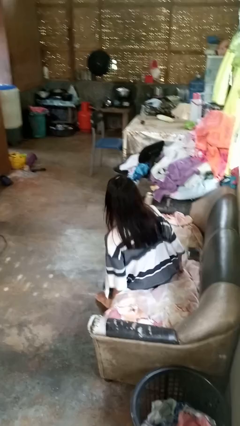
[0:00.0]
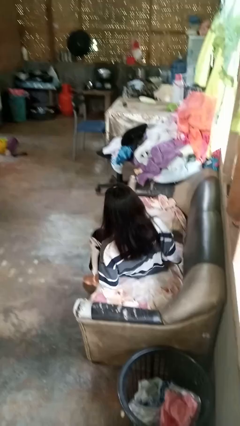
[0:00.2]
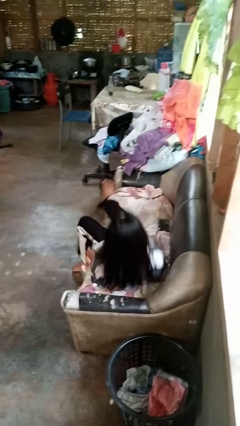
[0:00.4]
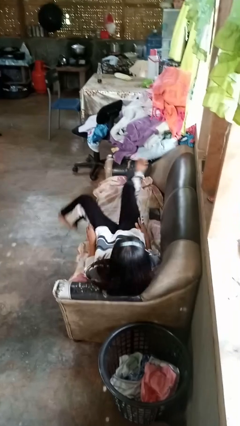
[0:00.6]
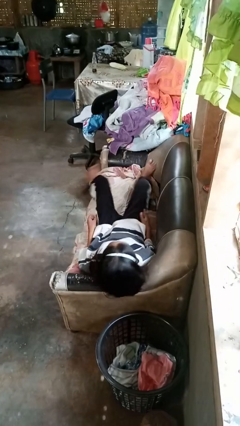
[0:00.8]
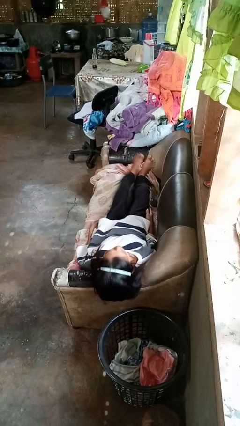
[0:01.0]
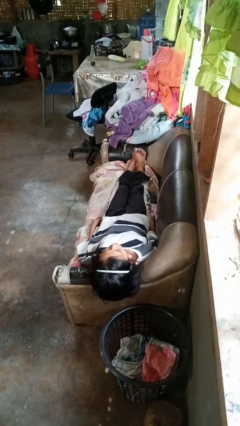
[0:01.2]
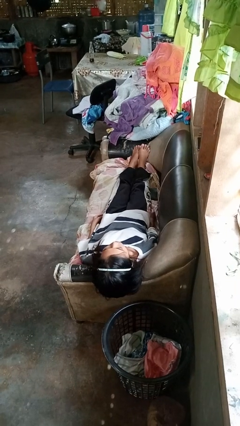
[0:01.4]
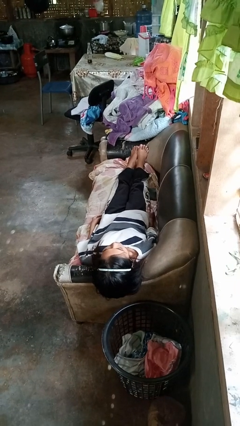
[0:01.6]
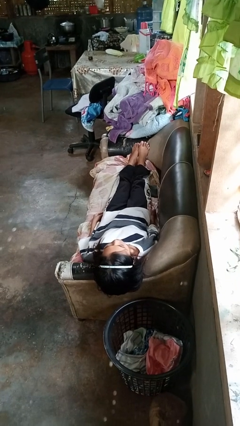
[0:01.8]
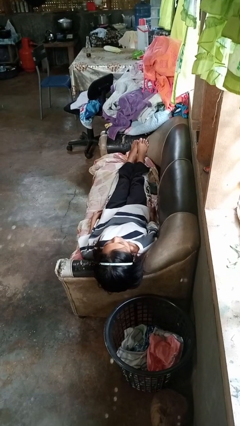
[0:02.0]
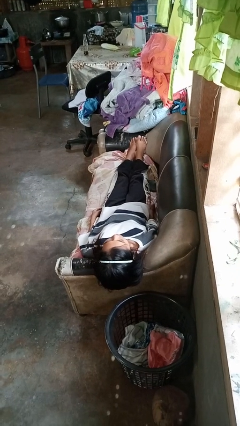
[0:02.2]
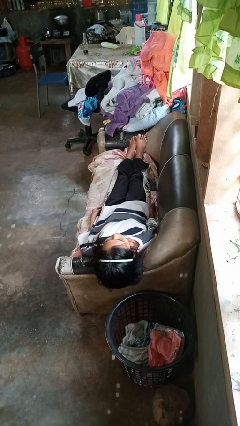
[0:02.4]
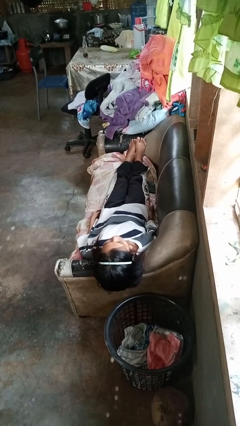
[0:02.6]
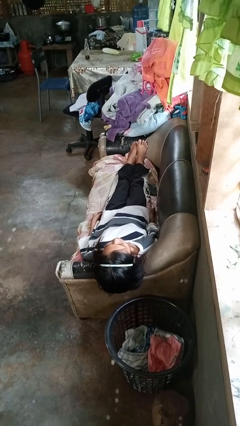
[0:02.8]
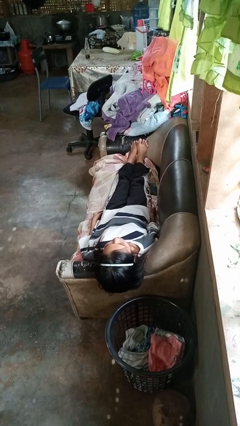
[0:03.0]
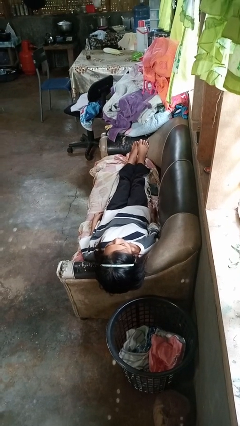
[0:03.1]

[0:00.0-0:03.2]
person lies down on couch

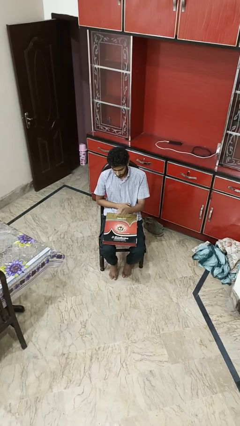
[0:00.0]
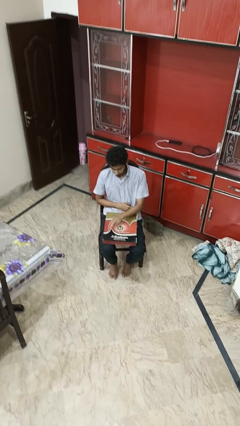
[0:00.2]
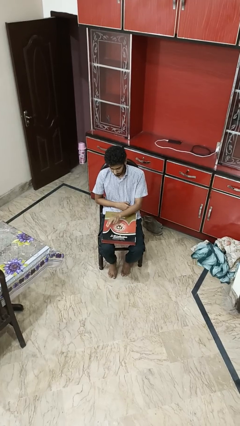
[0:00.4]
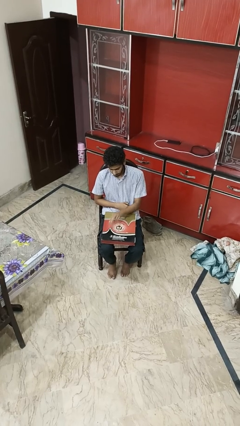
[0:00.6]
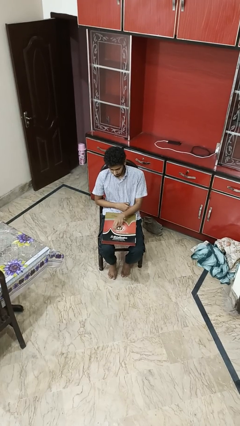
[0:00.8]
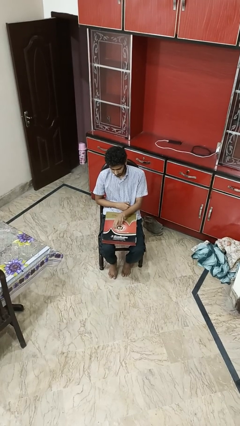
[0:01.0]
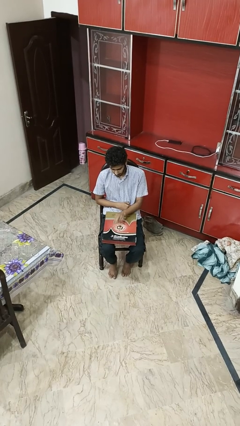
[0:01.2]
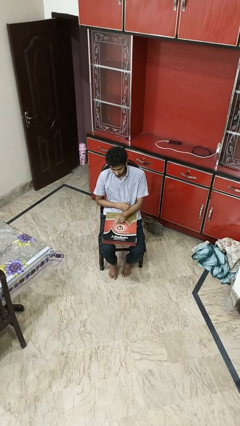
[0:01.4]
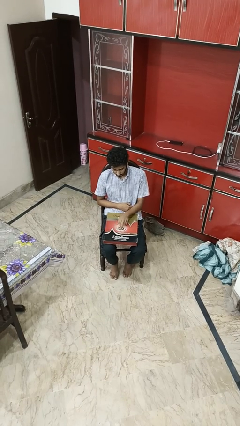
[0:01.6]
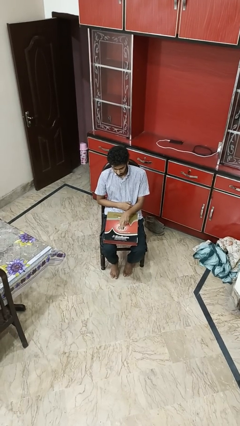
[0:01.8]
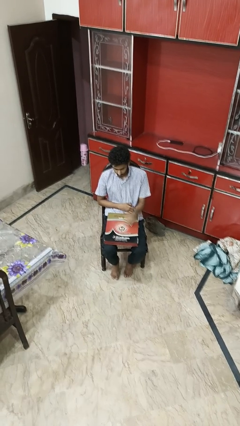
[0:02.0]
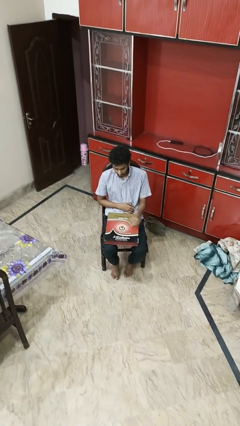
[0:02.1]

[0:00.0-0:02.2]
person taps object with finger

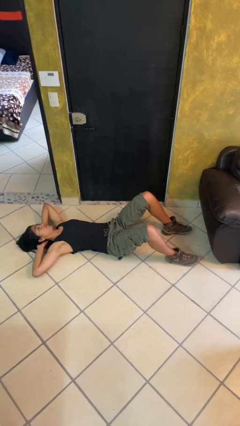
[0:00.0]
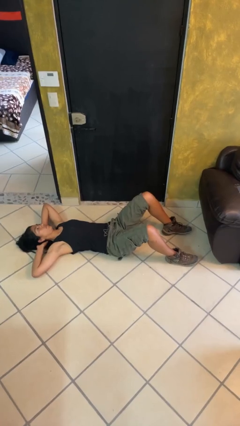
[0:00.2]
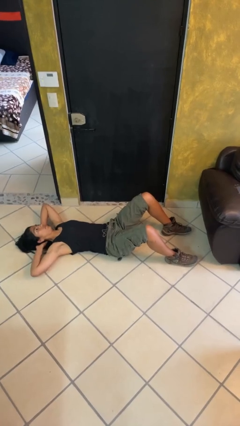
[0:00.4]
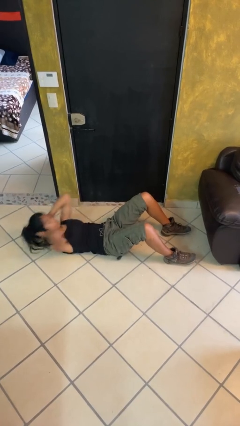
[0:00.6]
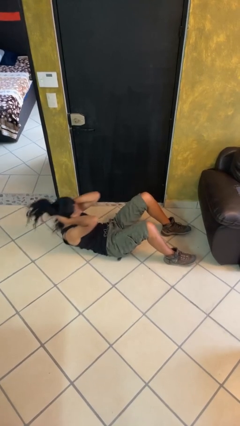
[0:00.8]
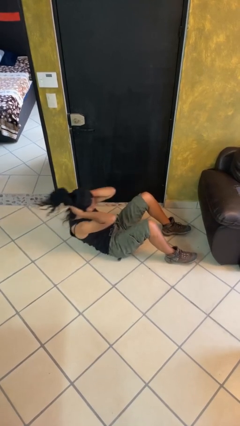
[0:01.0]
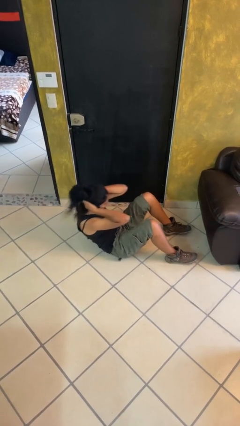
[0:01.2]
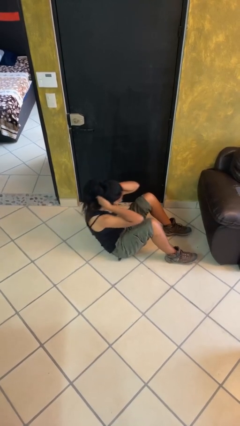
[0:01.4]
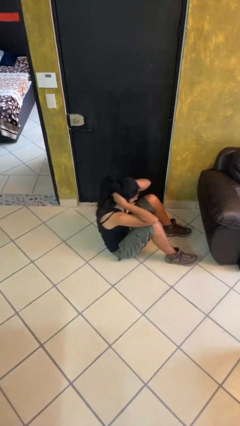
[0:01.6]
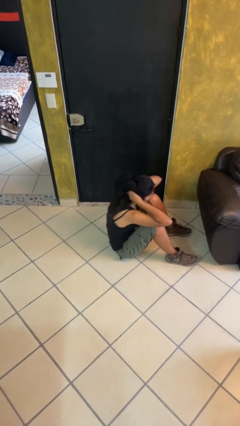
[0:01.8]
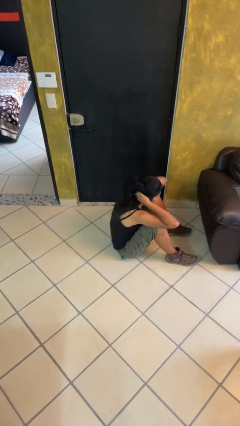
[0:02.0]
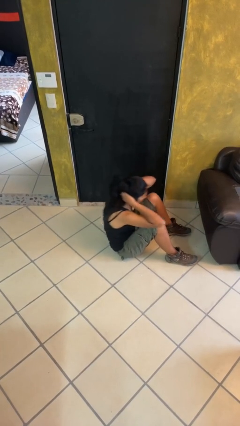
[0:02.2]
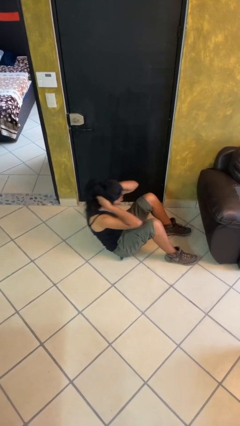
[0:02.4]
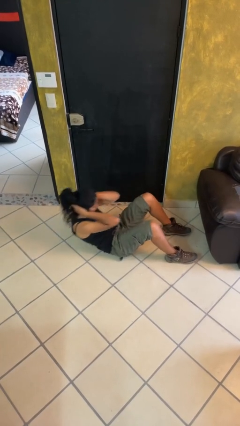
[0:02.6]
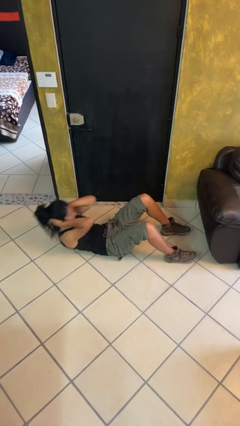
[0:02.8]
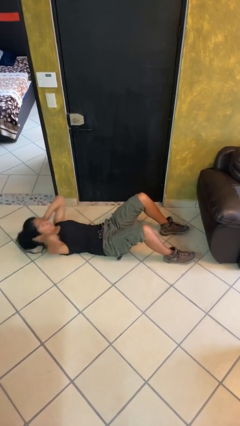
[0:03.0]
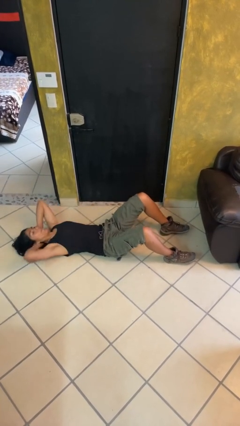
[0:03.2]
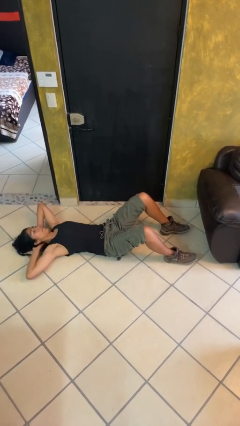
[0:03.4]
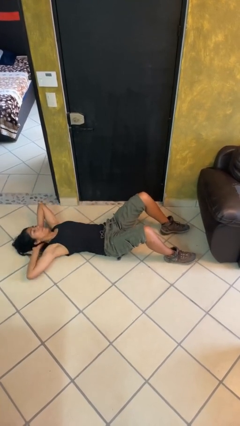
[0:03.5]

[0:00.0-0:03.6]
person exercises with situp

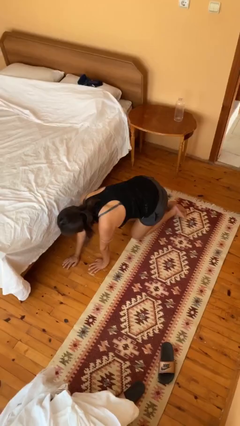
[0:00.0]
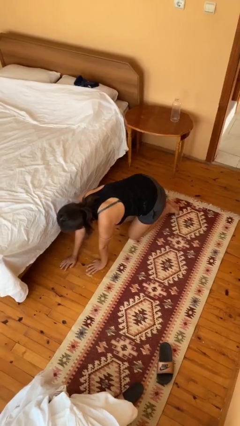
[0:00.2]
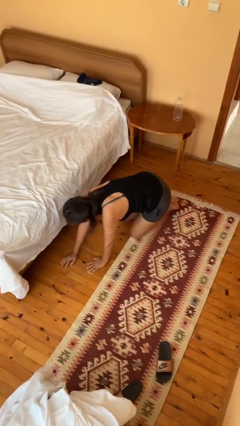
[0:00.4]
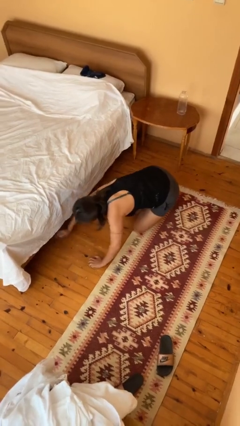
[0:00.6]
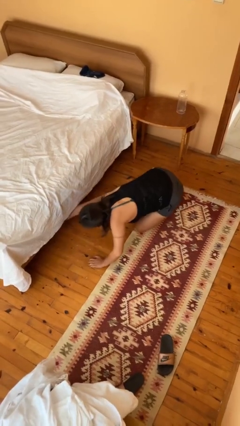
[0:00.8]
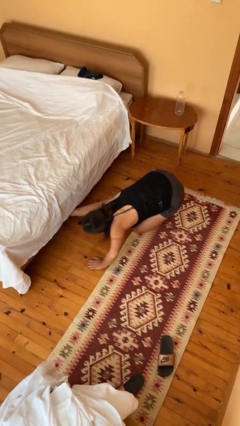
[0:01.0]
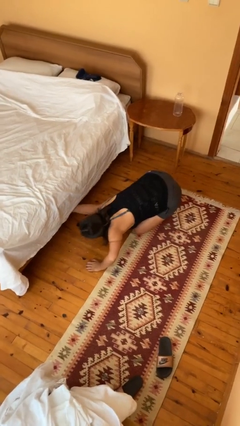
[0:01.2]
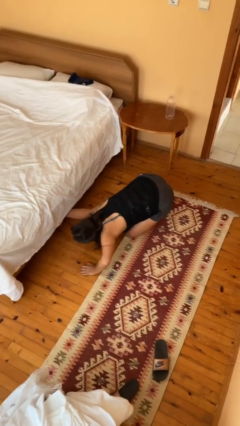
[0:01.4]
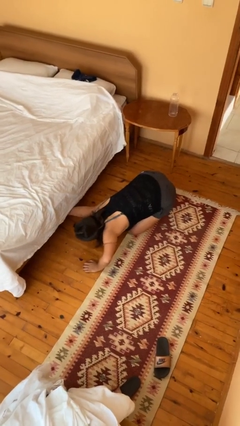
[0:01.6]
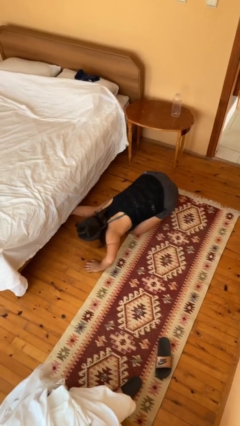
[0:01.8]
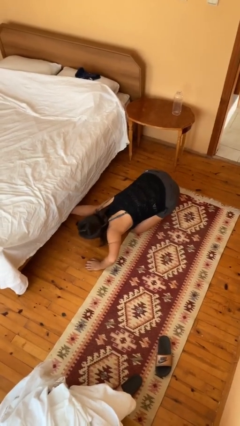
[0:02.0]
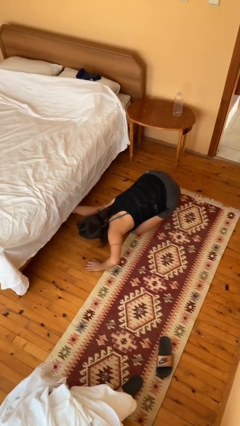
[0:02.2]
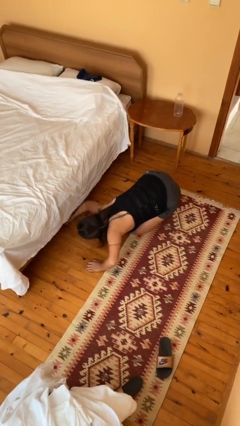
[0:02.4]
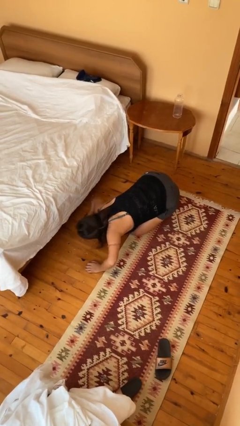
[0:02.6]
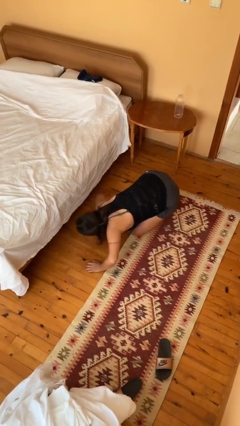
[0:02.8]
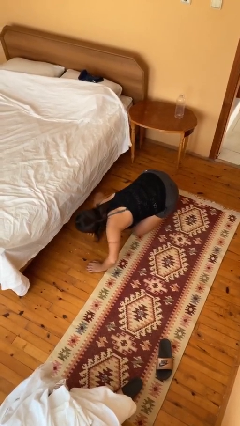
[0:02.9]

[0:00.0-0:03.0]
person searches under bed

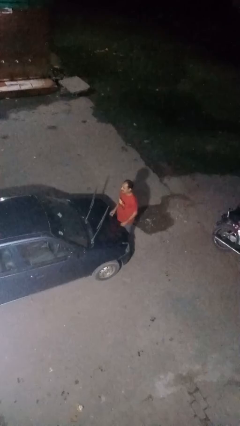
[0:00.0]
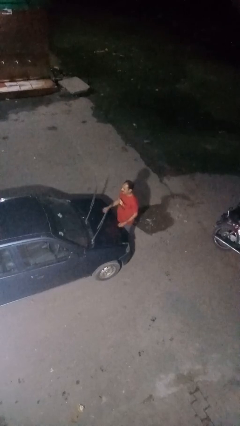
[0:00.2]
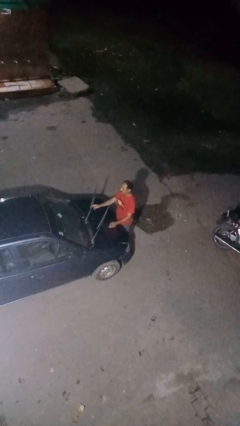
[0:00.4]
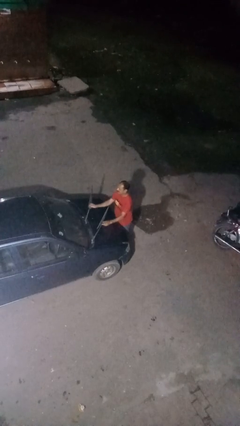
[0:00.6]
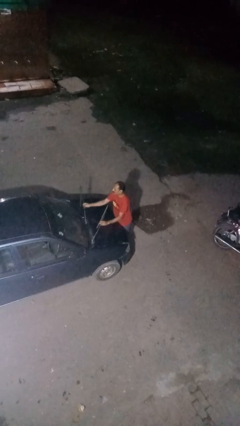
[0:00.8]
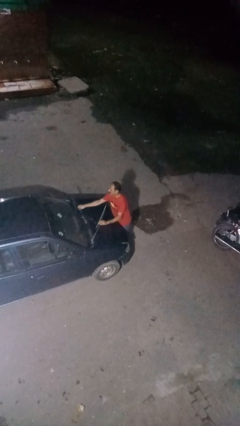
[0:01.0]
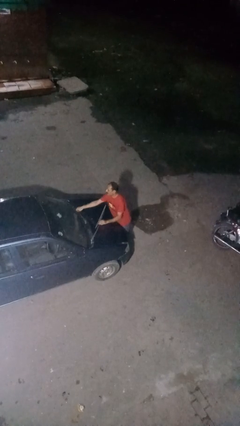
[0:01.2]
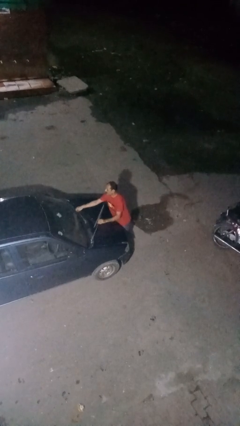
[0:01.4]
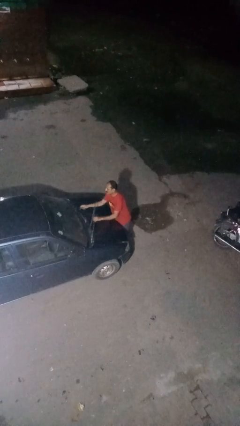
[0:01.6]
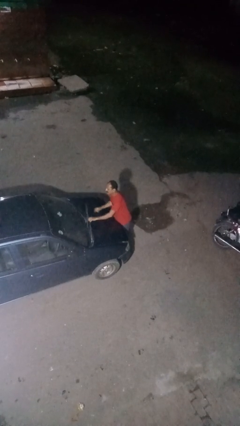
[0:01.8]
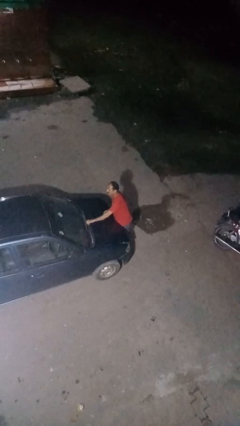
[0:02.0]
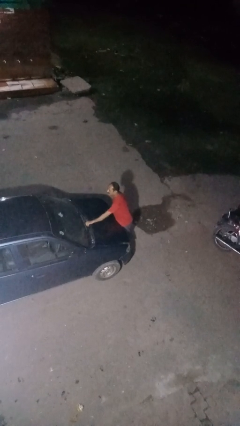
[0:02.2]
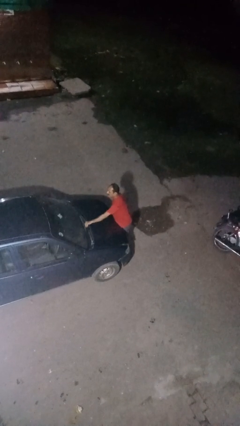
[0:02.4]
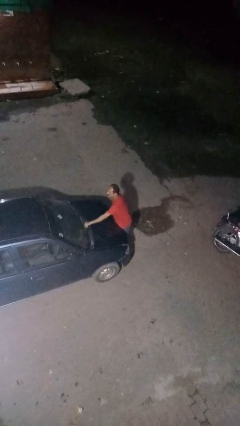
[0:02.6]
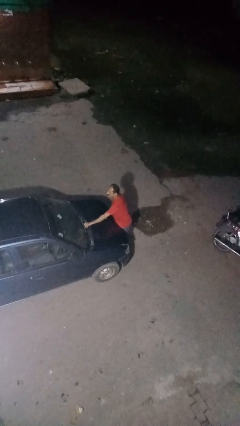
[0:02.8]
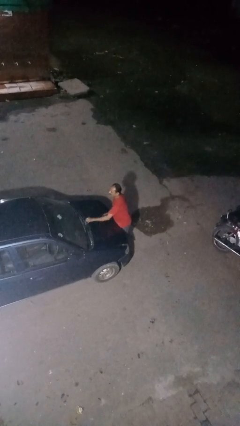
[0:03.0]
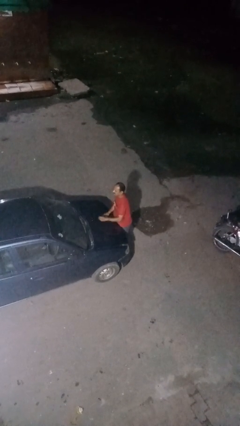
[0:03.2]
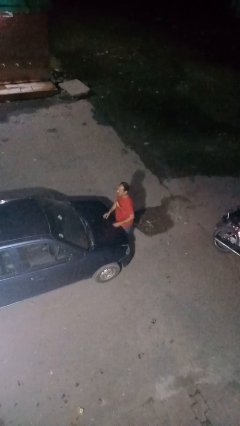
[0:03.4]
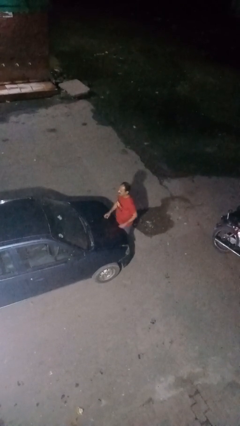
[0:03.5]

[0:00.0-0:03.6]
person flips down car wipers

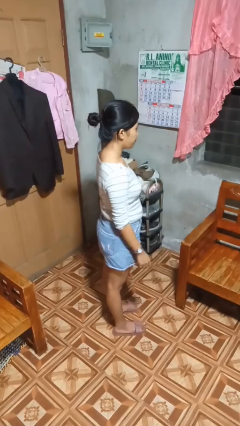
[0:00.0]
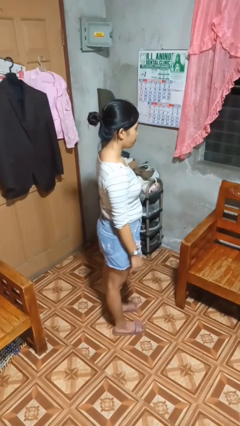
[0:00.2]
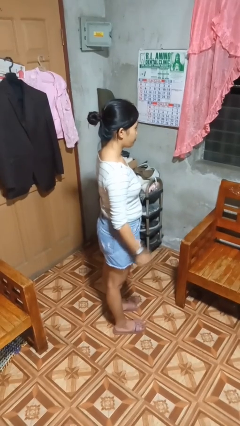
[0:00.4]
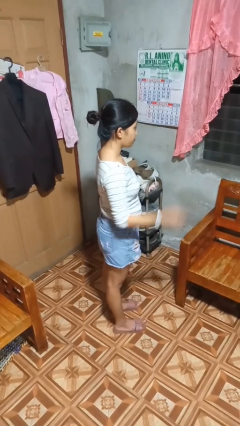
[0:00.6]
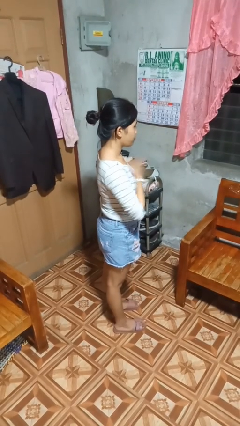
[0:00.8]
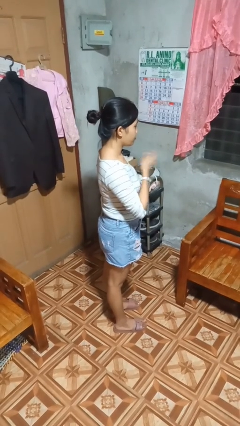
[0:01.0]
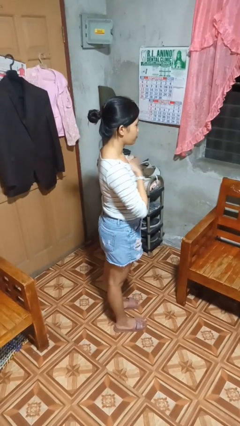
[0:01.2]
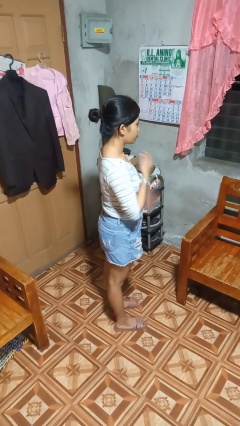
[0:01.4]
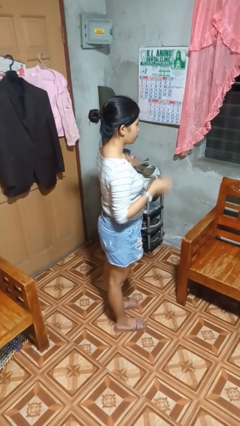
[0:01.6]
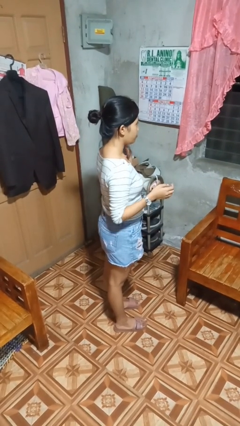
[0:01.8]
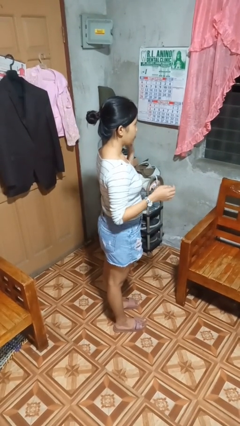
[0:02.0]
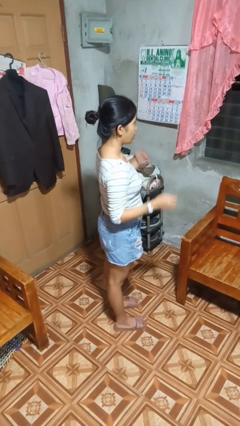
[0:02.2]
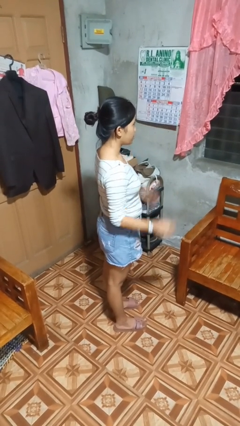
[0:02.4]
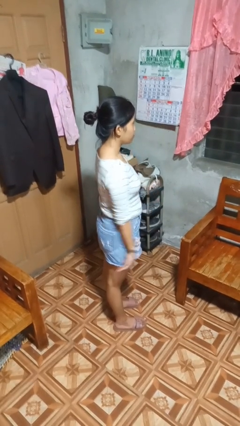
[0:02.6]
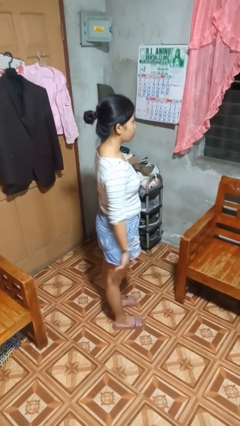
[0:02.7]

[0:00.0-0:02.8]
person drums on chest
